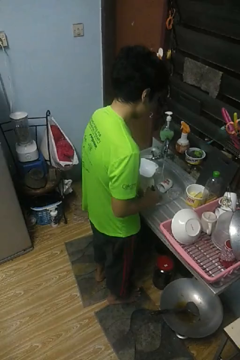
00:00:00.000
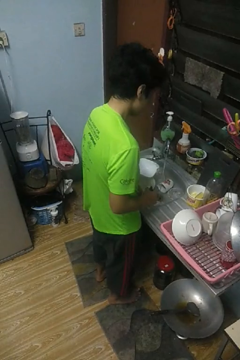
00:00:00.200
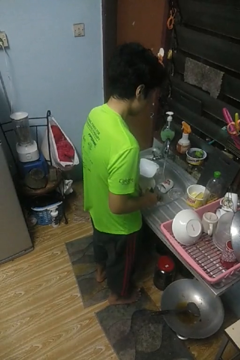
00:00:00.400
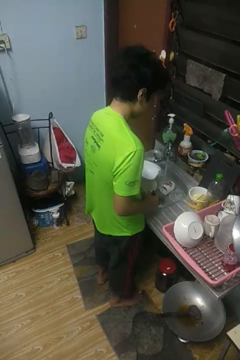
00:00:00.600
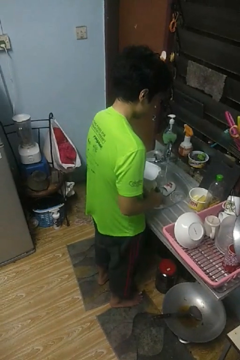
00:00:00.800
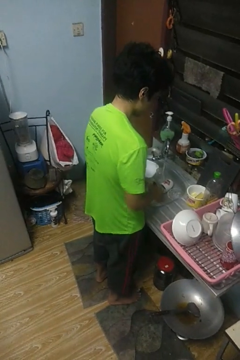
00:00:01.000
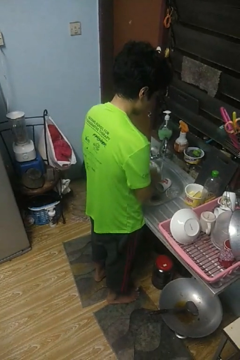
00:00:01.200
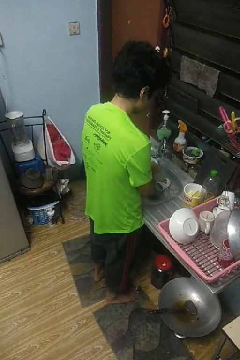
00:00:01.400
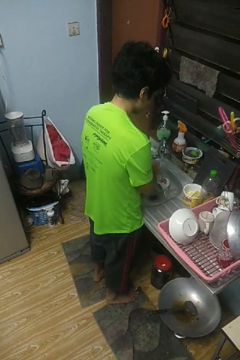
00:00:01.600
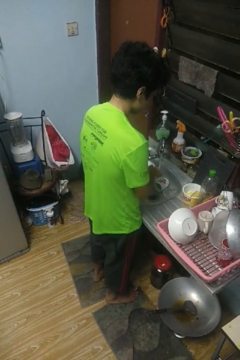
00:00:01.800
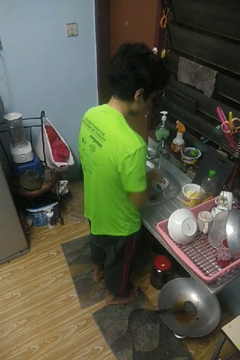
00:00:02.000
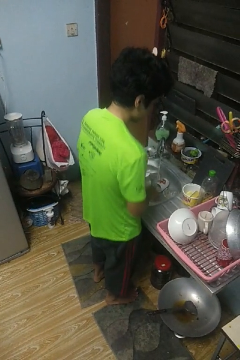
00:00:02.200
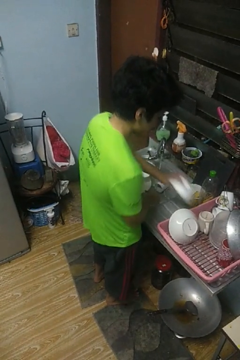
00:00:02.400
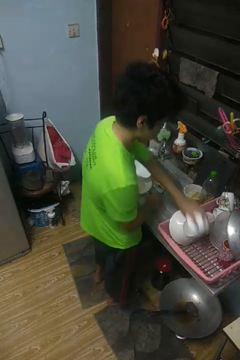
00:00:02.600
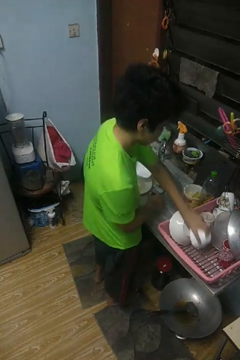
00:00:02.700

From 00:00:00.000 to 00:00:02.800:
person washes dish

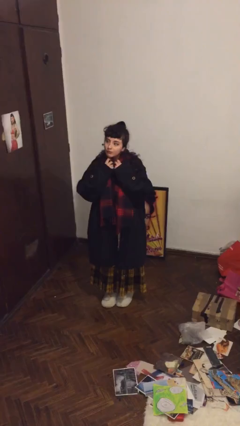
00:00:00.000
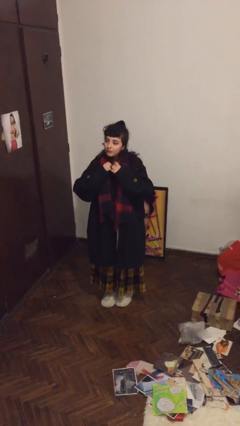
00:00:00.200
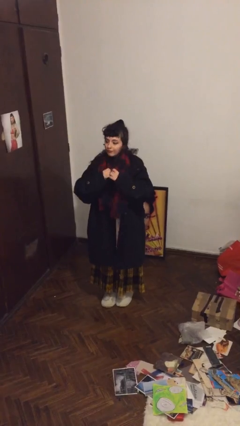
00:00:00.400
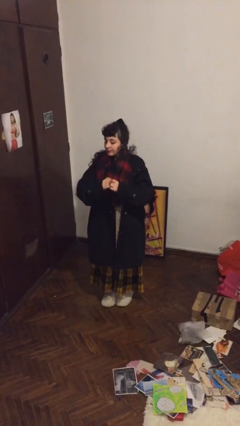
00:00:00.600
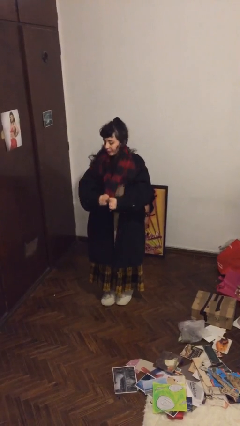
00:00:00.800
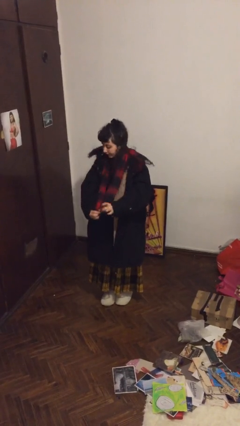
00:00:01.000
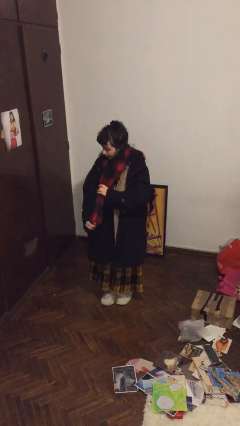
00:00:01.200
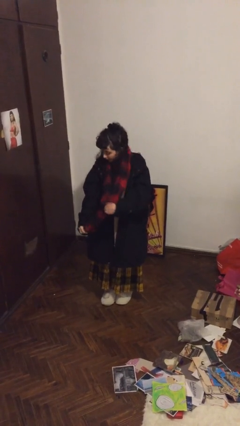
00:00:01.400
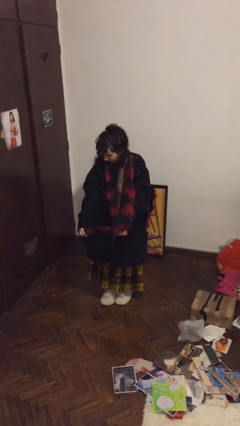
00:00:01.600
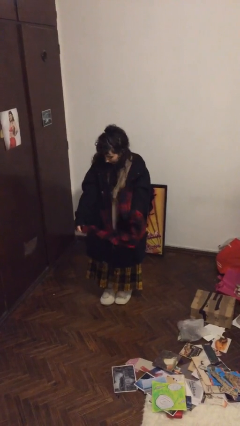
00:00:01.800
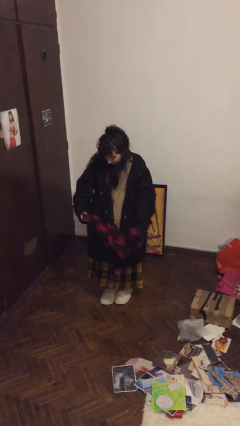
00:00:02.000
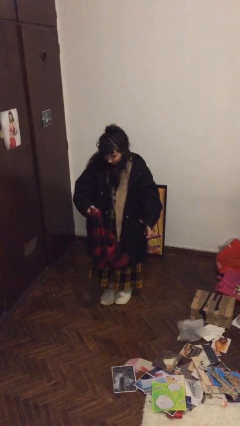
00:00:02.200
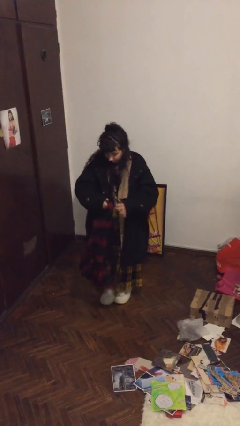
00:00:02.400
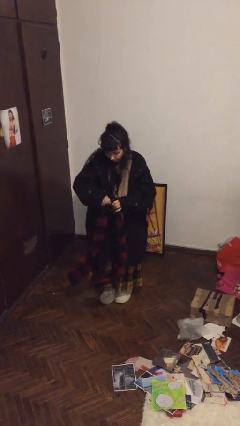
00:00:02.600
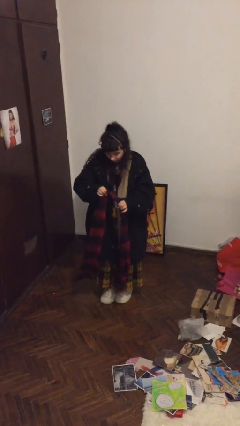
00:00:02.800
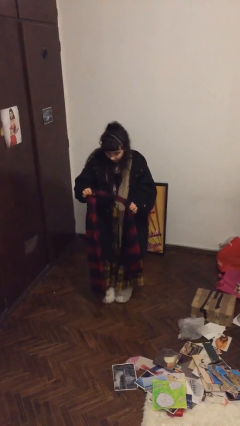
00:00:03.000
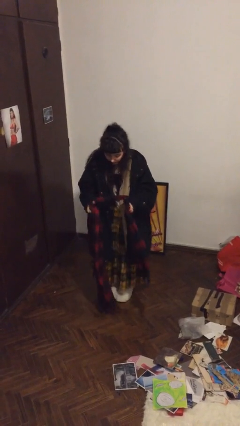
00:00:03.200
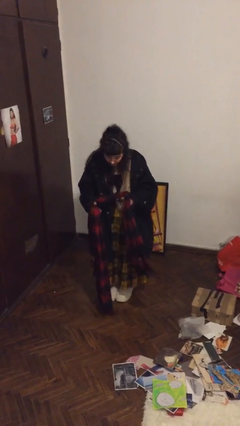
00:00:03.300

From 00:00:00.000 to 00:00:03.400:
person takes off scarf

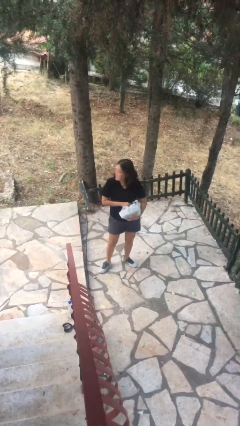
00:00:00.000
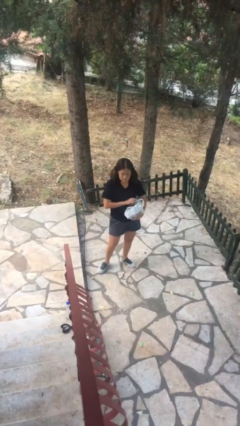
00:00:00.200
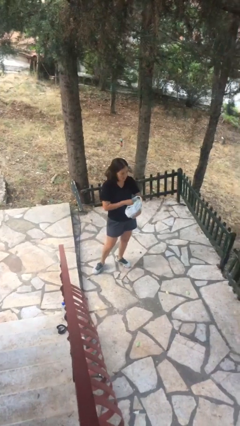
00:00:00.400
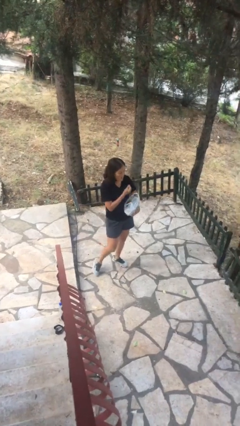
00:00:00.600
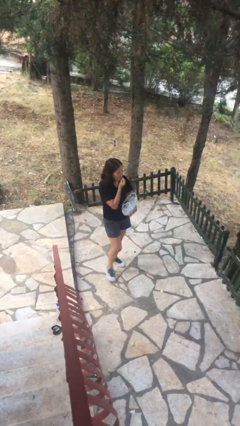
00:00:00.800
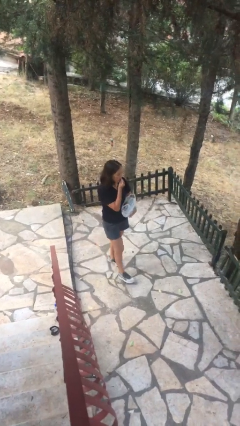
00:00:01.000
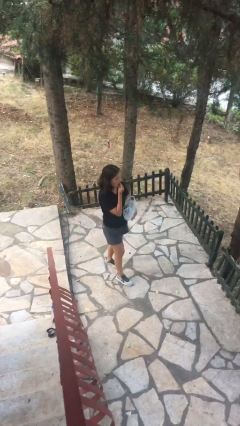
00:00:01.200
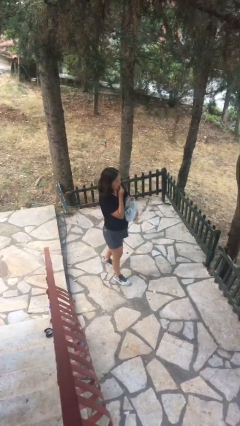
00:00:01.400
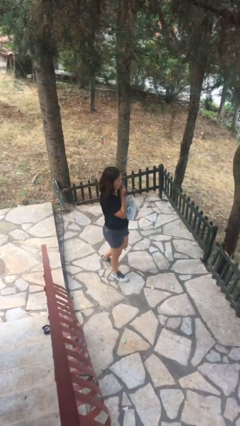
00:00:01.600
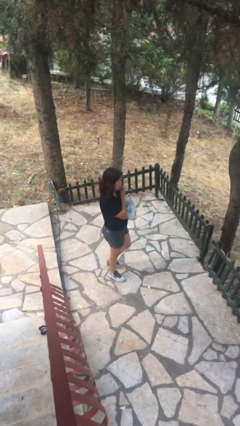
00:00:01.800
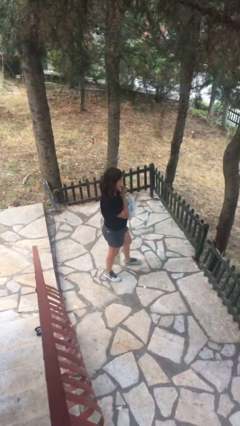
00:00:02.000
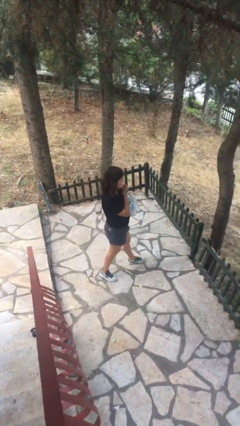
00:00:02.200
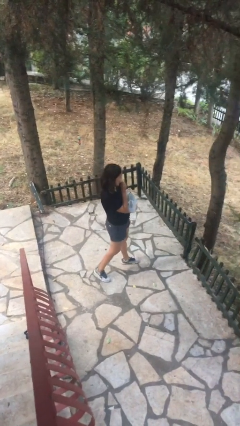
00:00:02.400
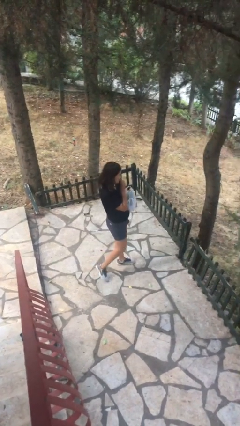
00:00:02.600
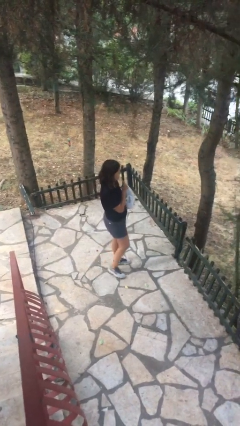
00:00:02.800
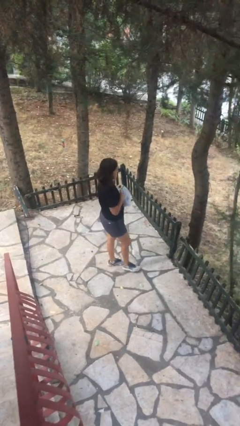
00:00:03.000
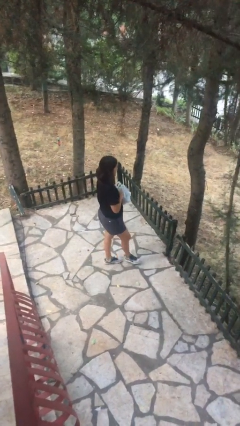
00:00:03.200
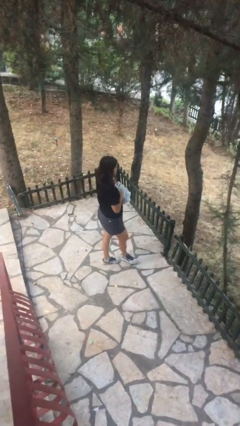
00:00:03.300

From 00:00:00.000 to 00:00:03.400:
person eats snack from bag

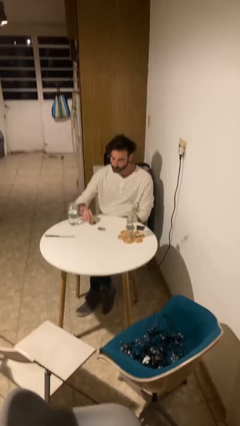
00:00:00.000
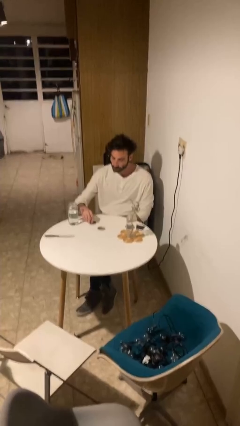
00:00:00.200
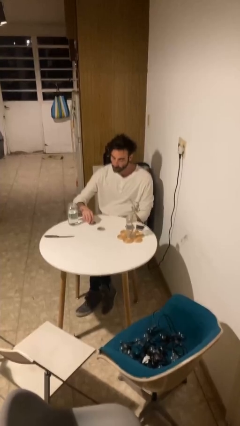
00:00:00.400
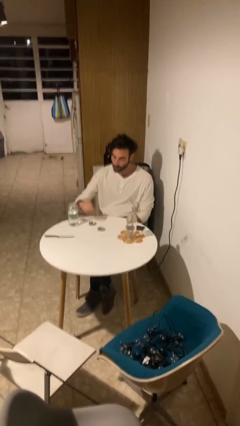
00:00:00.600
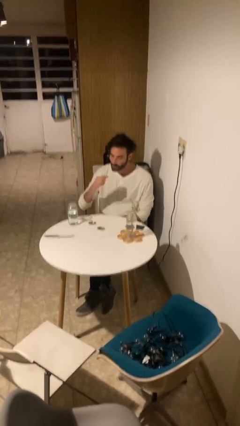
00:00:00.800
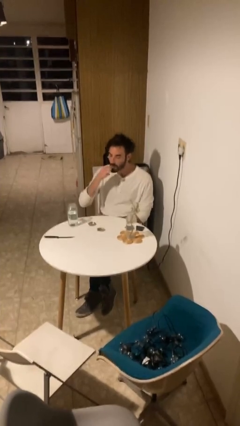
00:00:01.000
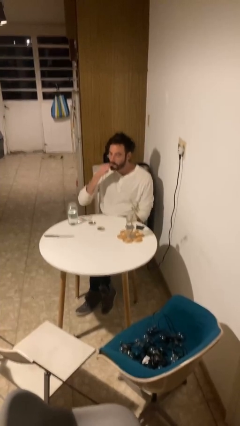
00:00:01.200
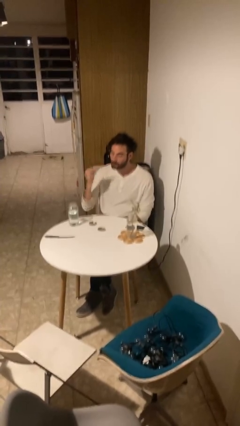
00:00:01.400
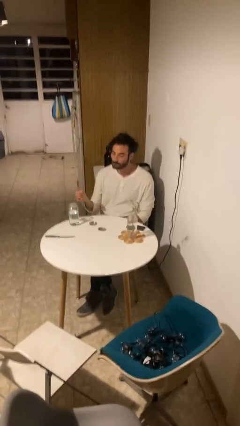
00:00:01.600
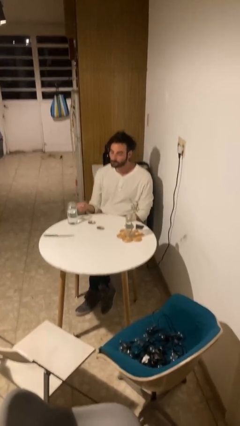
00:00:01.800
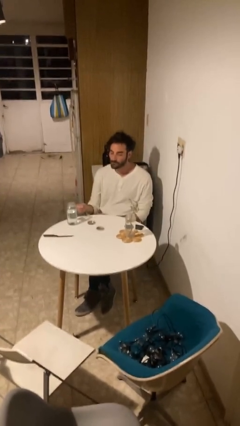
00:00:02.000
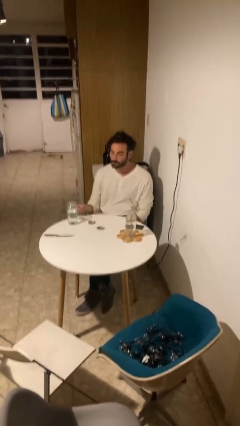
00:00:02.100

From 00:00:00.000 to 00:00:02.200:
person takes medicine pills

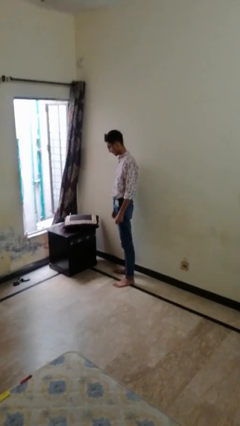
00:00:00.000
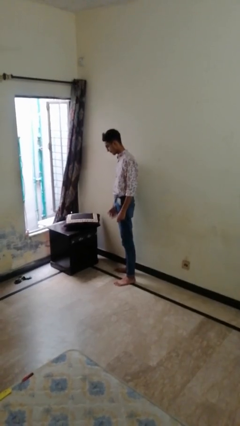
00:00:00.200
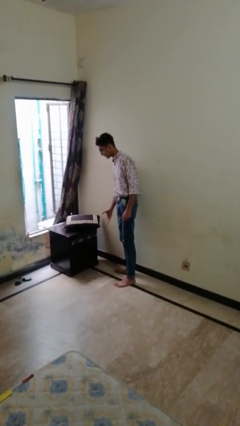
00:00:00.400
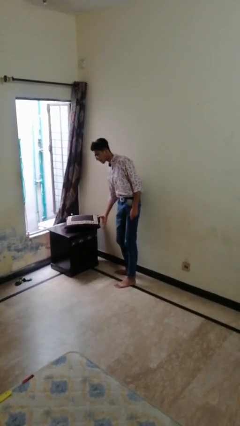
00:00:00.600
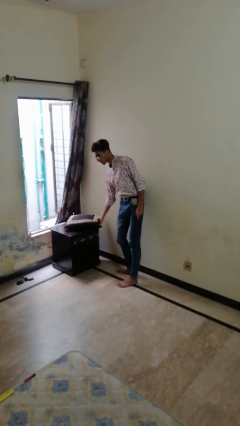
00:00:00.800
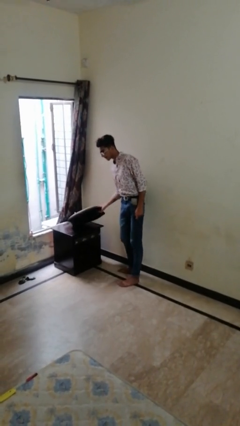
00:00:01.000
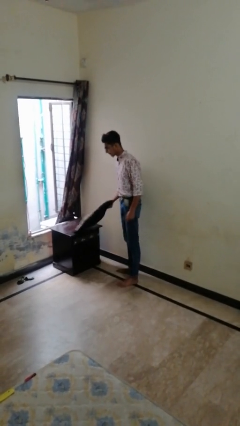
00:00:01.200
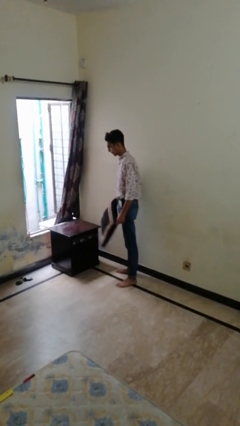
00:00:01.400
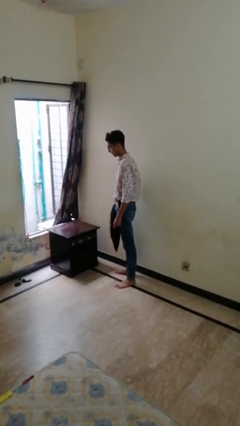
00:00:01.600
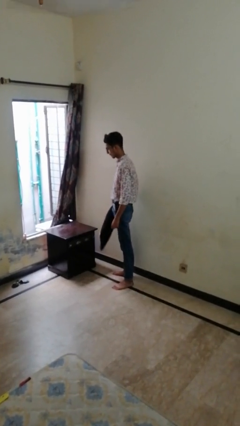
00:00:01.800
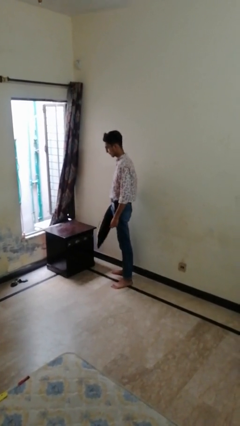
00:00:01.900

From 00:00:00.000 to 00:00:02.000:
person picks up object from table

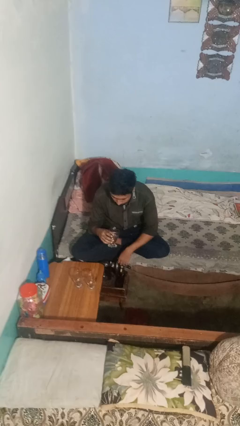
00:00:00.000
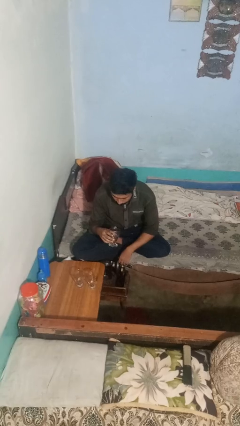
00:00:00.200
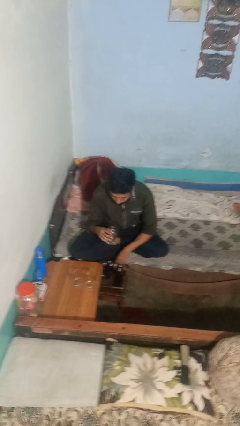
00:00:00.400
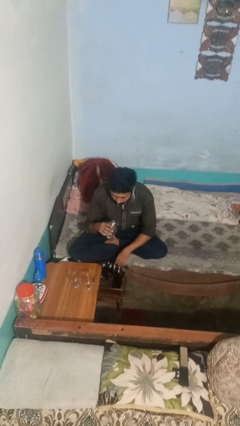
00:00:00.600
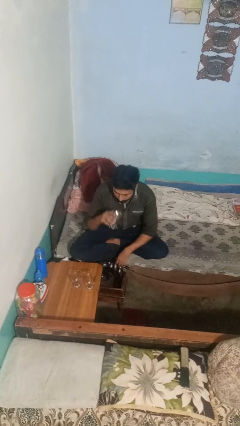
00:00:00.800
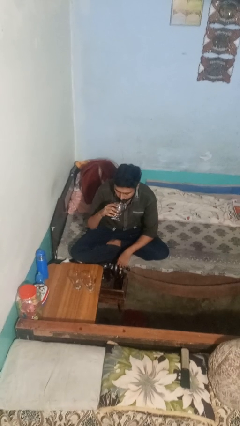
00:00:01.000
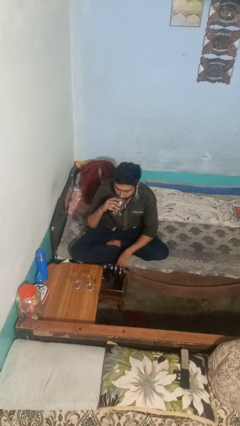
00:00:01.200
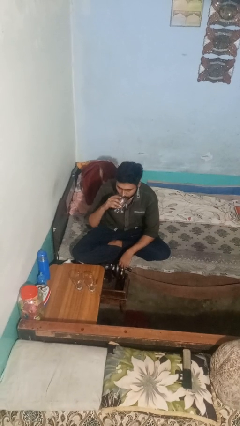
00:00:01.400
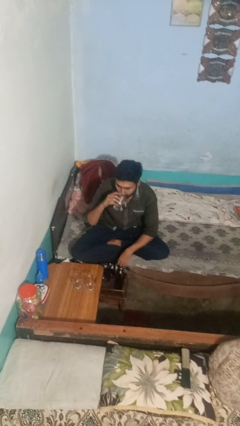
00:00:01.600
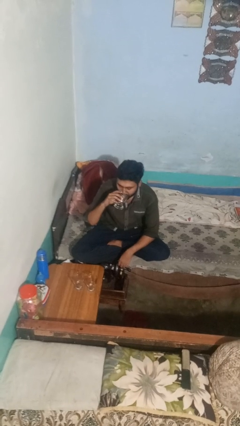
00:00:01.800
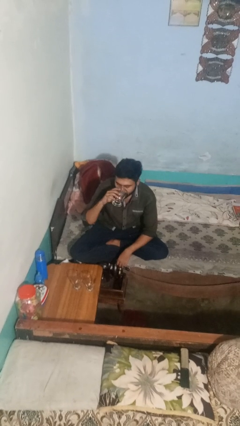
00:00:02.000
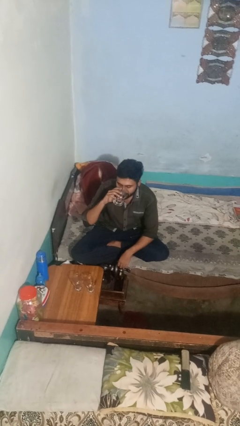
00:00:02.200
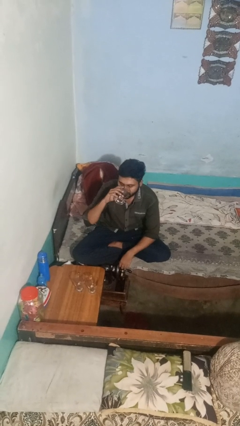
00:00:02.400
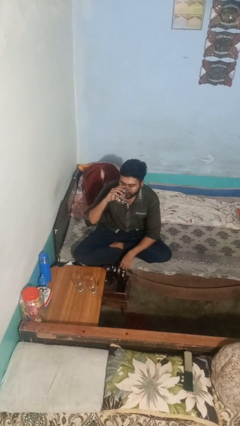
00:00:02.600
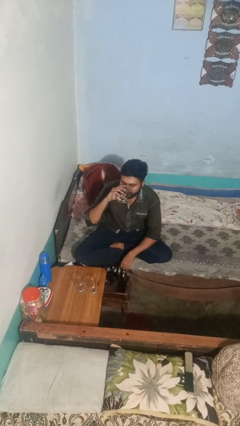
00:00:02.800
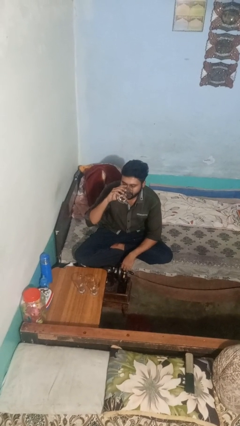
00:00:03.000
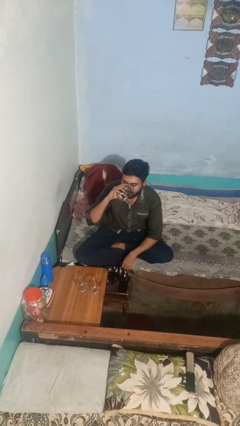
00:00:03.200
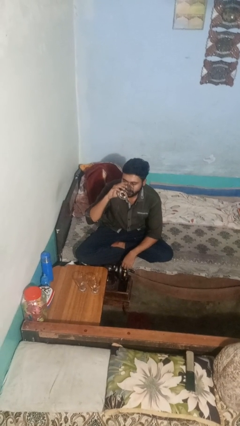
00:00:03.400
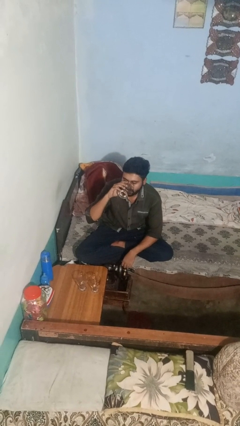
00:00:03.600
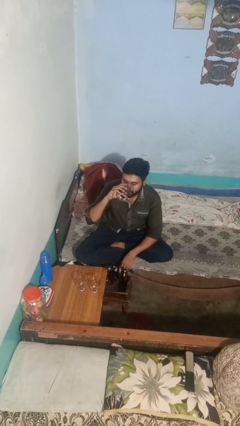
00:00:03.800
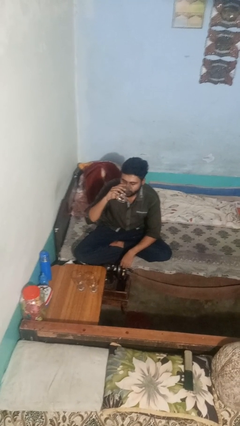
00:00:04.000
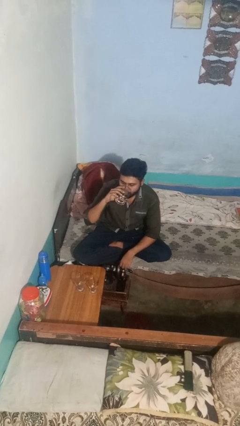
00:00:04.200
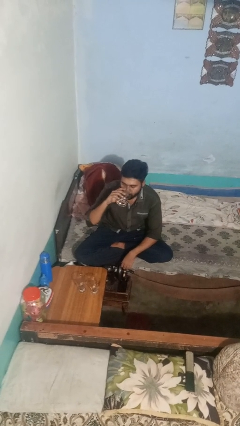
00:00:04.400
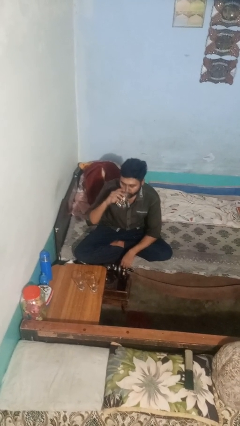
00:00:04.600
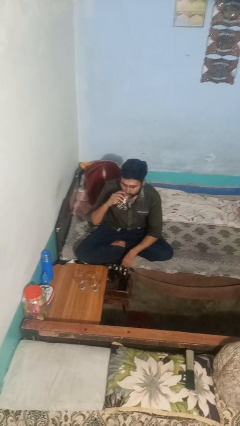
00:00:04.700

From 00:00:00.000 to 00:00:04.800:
person drinks from shotglass
